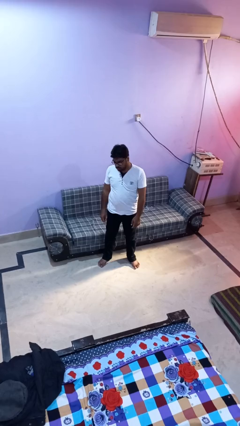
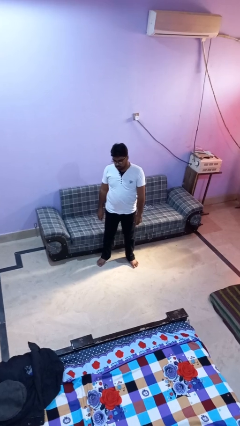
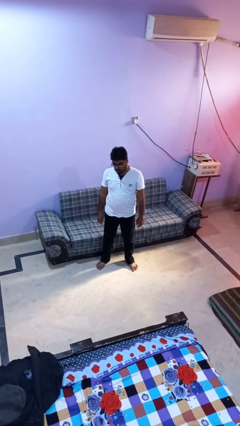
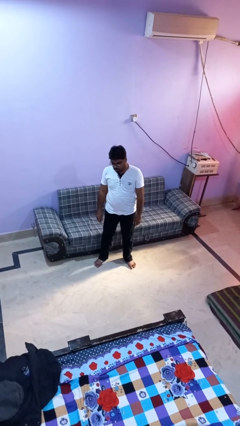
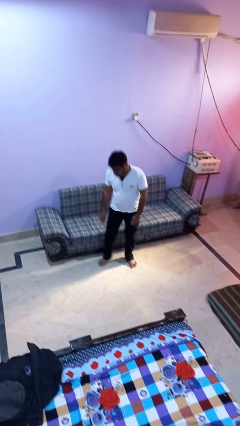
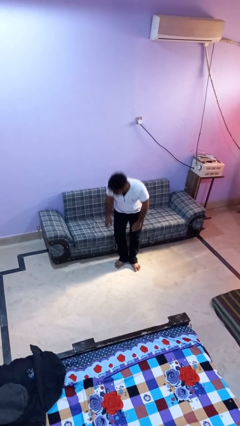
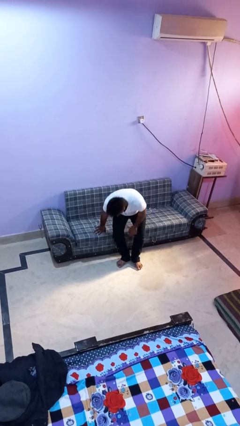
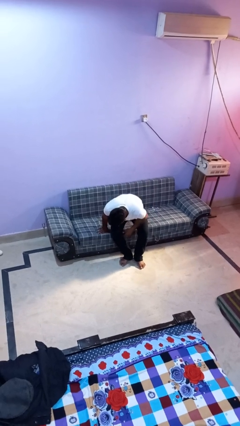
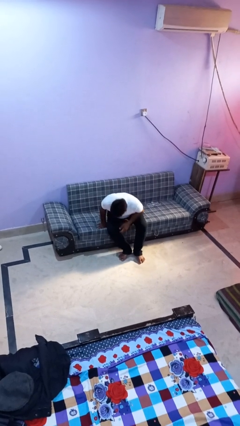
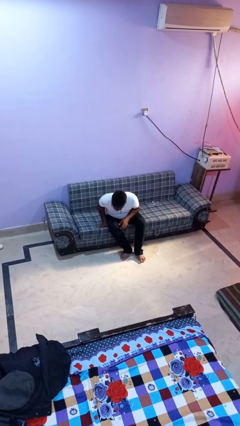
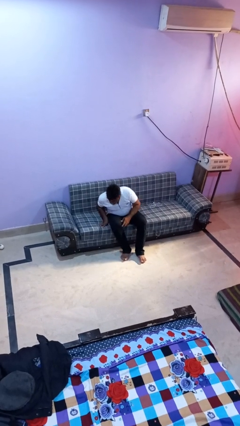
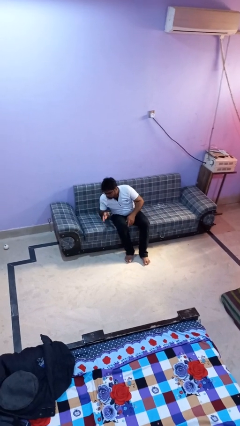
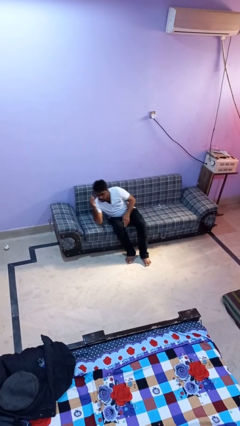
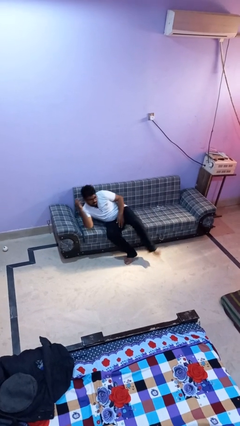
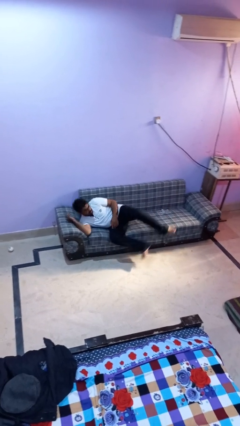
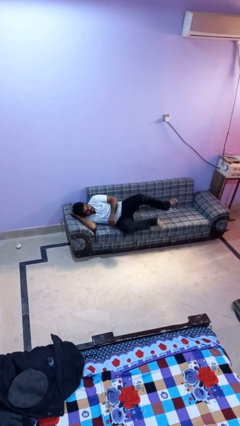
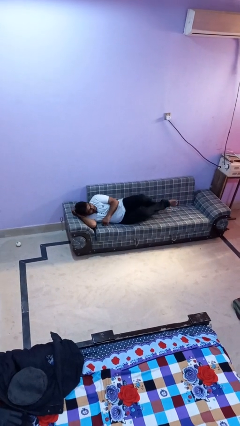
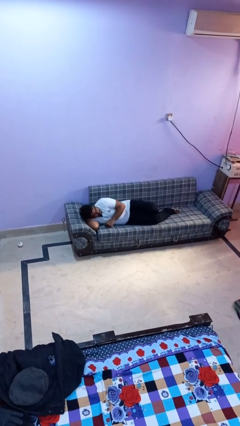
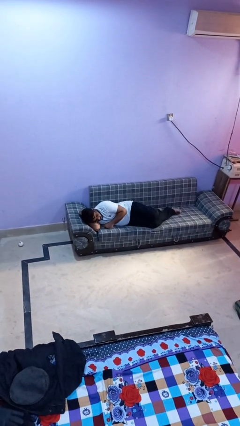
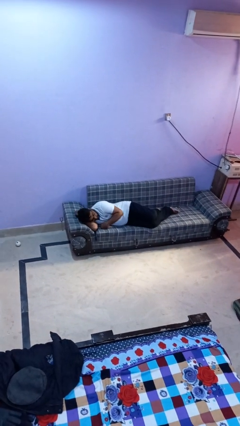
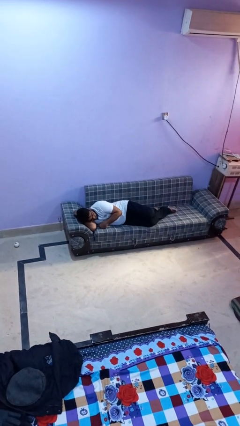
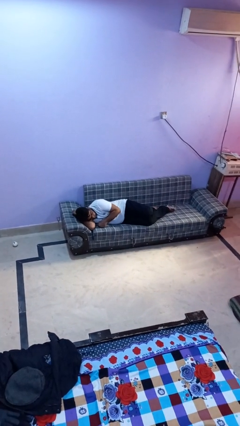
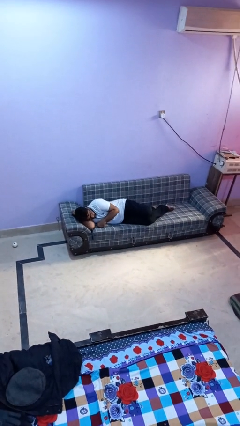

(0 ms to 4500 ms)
person lies down on couch

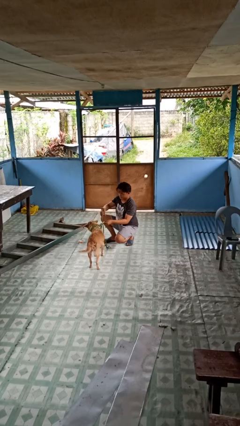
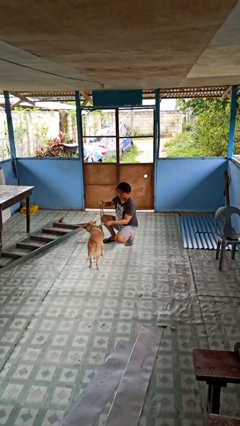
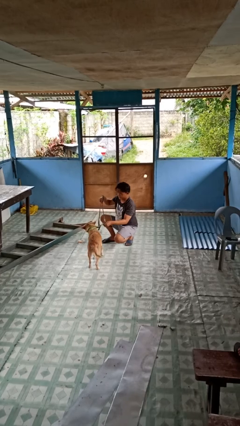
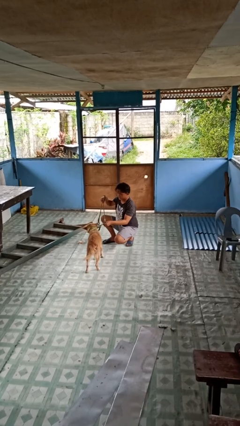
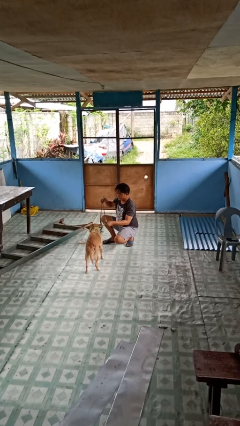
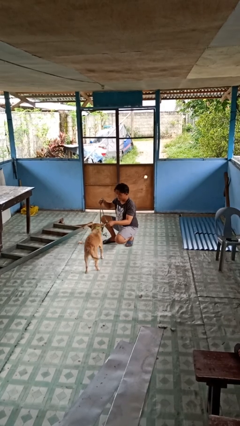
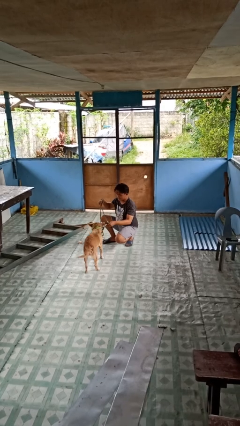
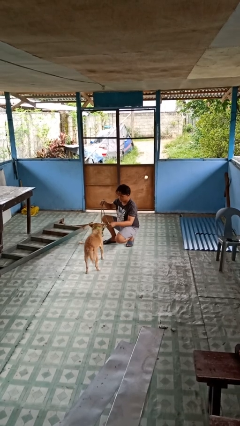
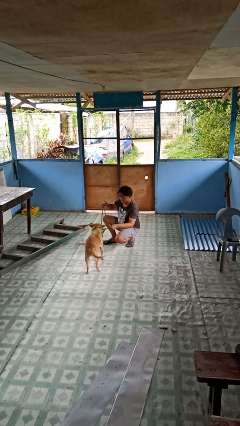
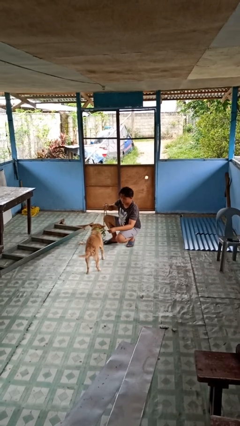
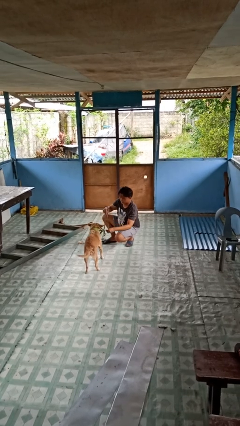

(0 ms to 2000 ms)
person attaches leash to dog

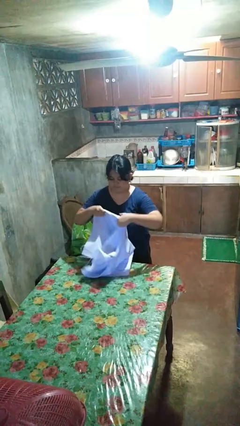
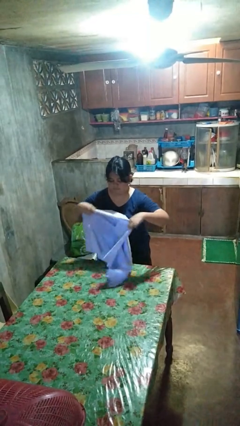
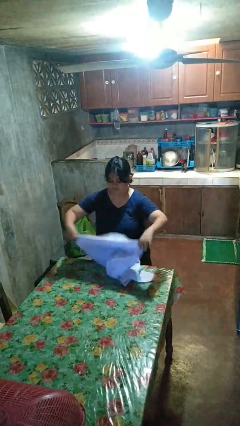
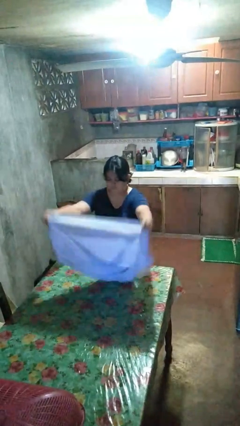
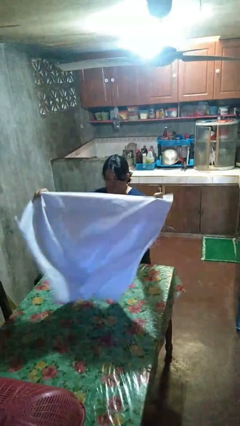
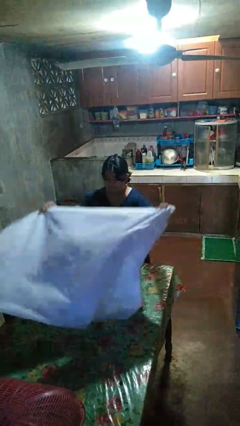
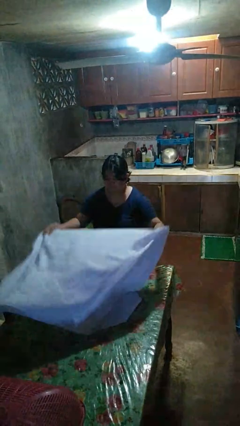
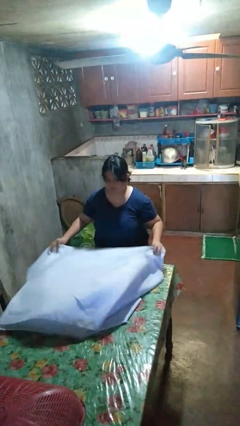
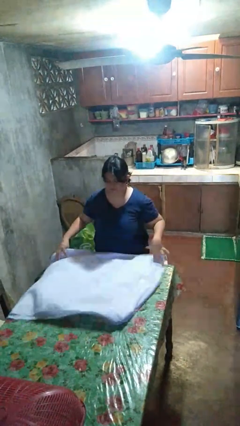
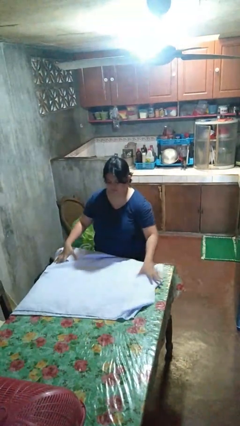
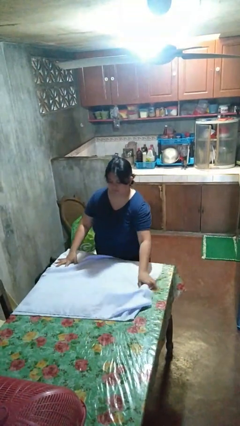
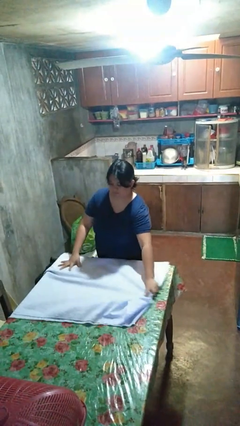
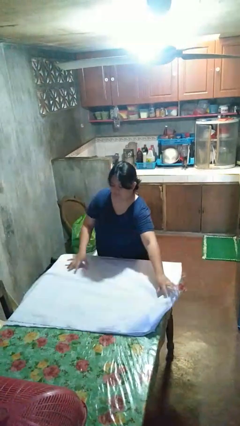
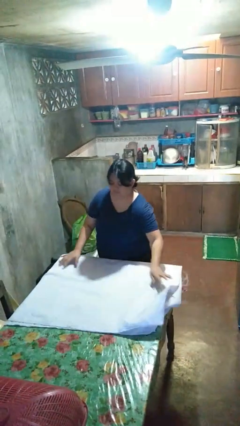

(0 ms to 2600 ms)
person spreads tablecloth

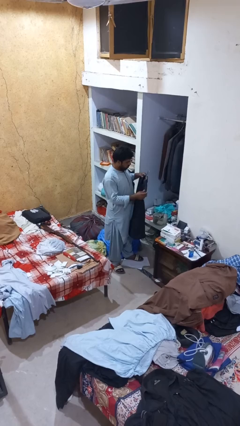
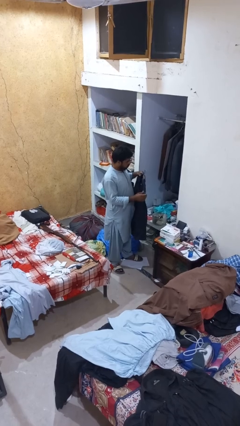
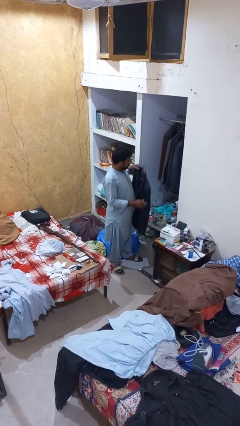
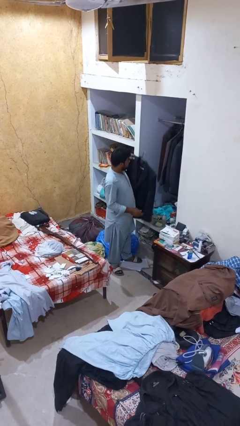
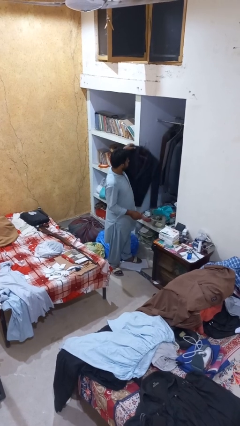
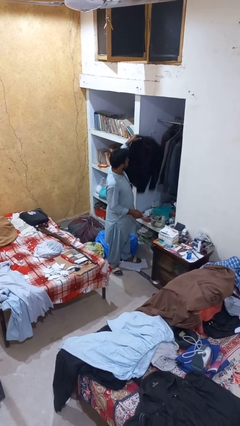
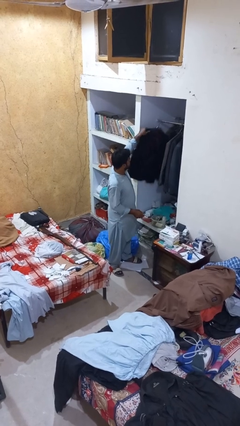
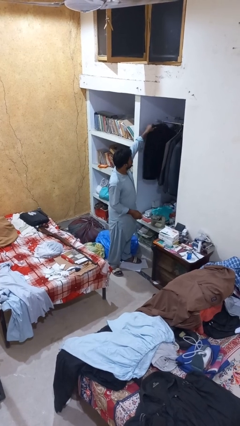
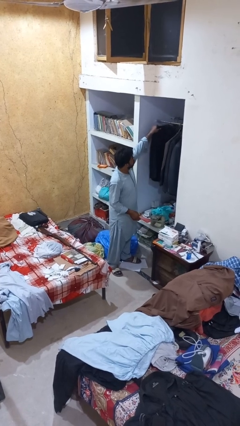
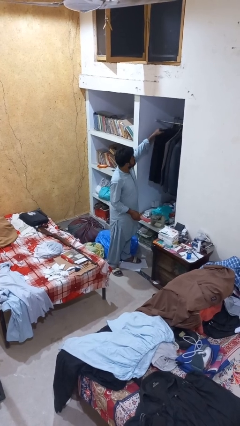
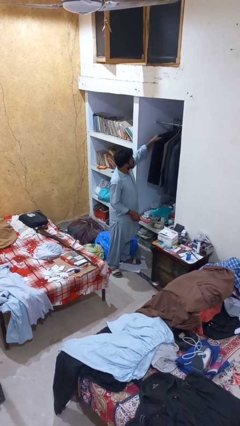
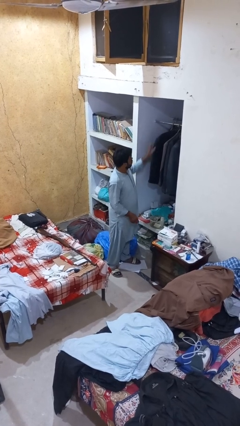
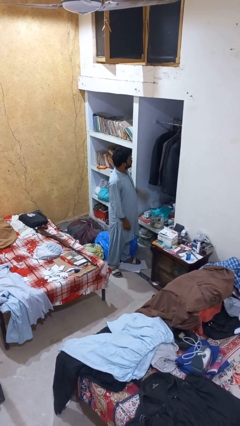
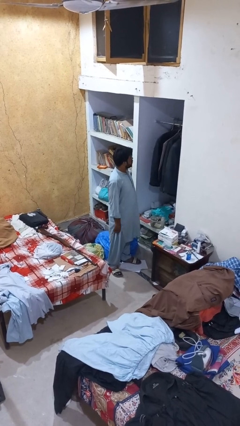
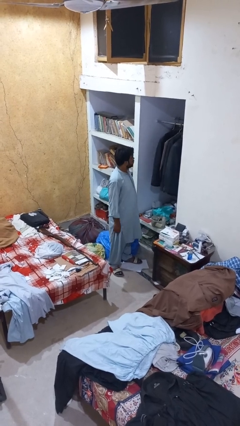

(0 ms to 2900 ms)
person puts clothes into closet

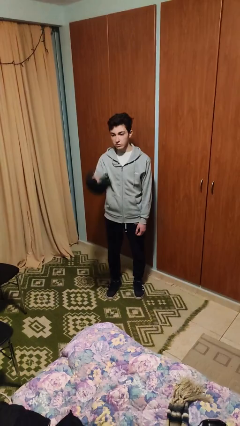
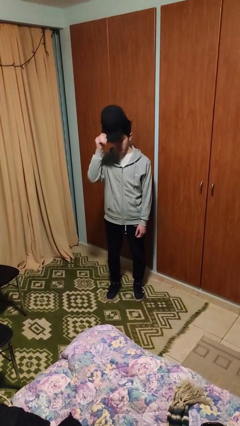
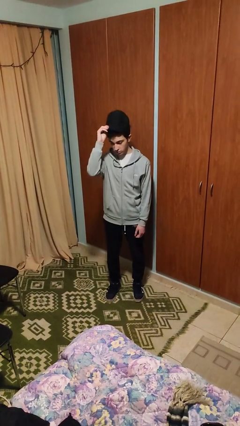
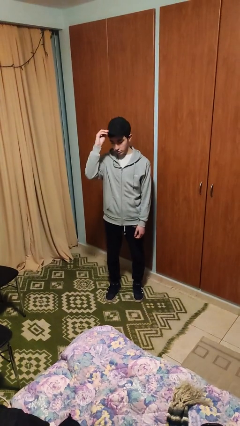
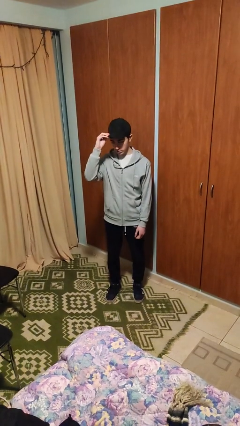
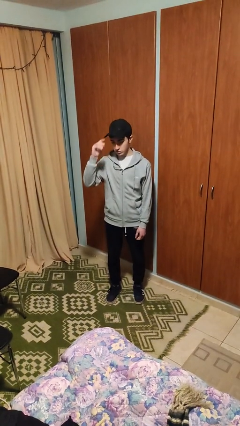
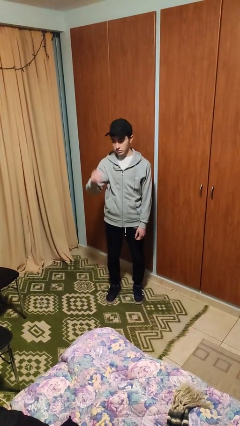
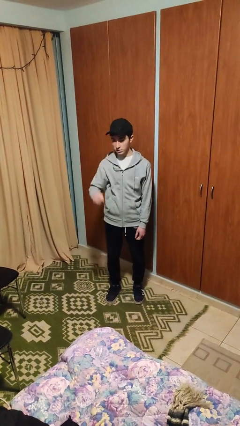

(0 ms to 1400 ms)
person puts on hat

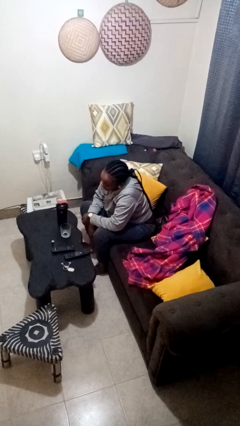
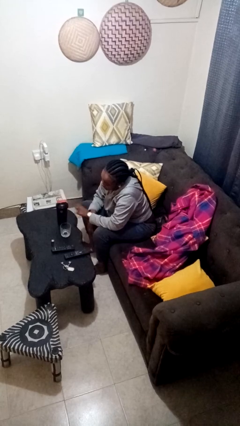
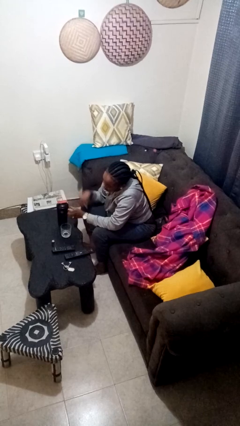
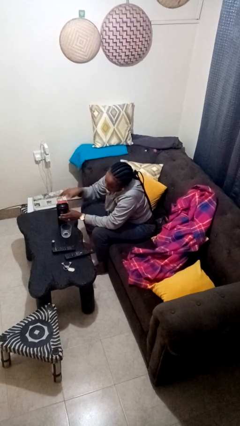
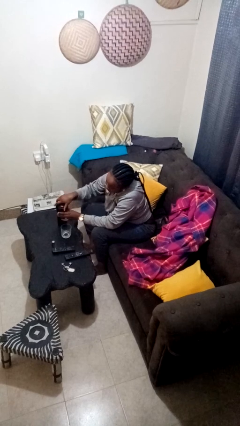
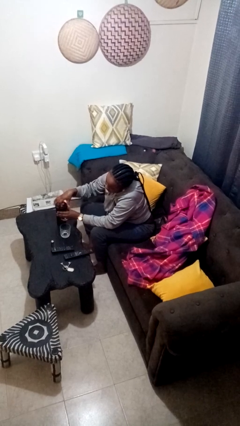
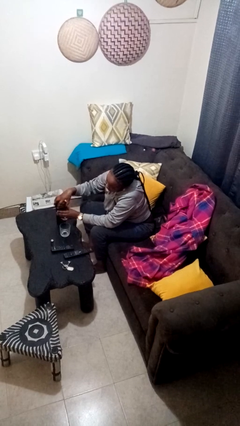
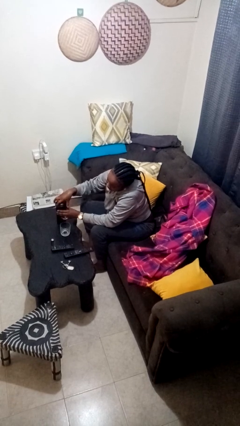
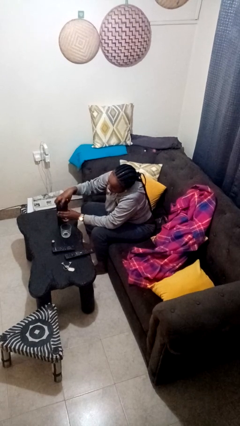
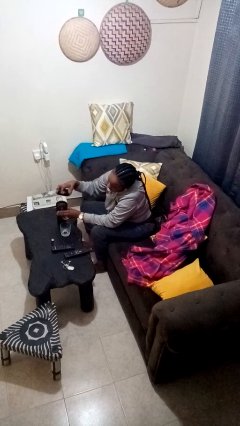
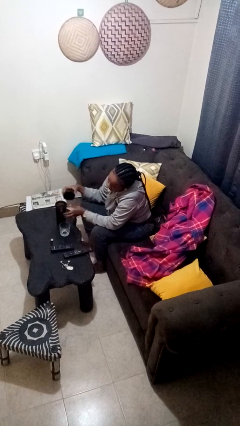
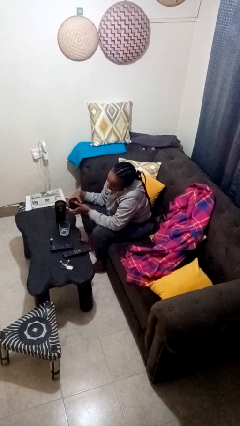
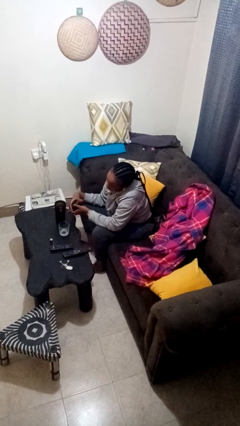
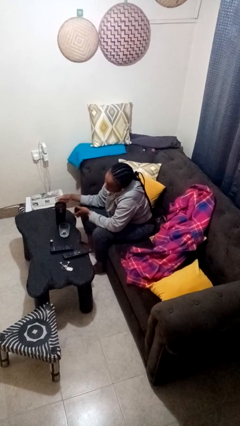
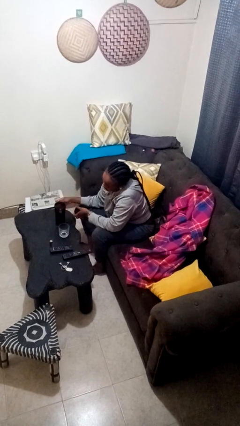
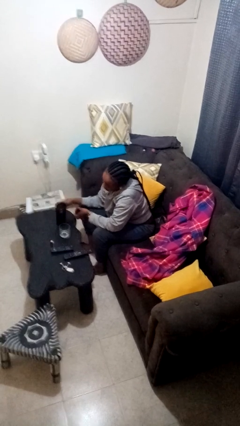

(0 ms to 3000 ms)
person unscrews lid from bottle

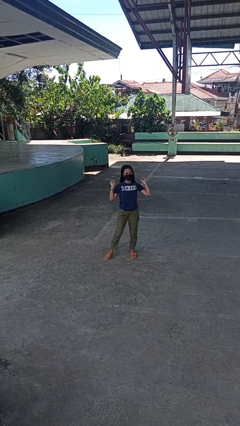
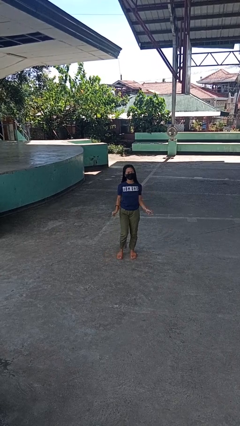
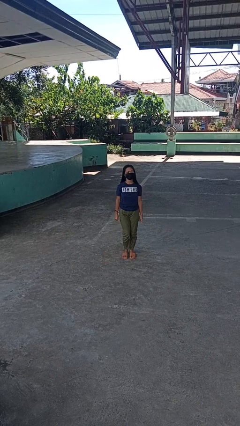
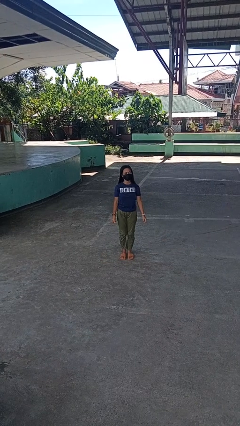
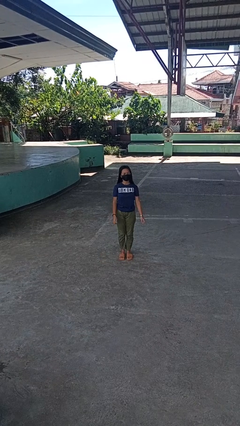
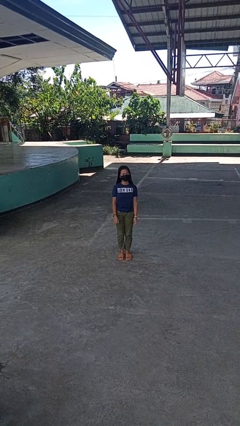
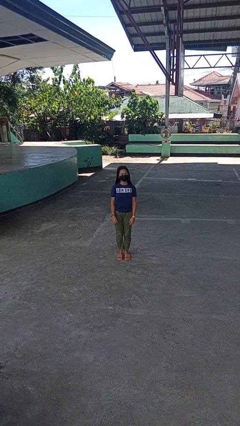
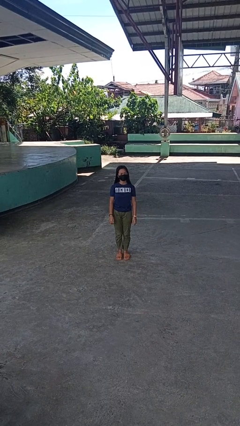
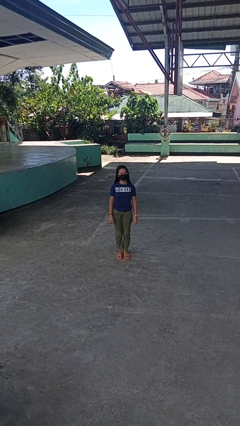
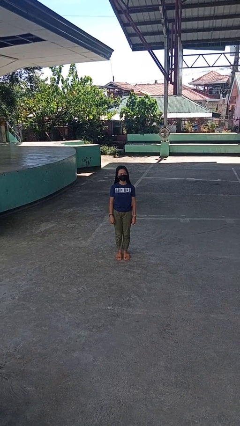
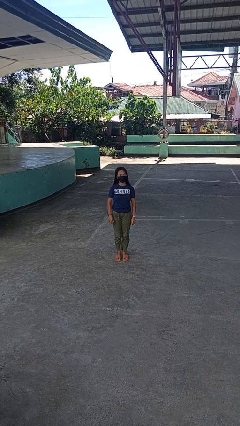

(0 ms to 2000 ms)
person stretches arms over head
